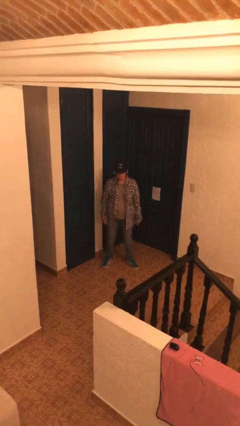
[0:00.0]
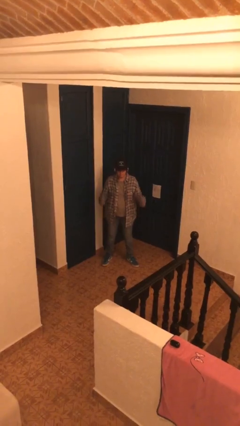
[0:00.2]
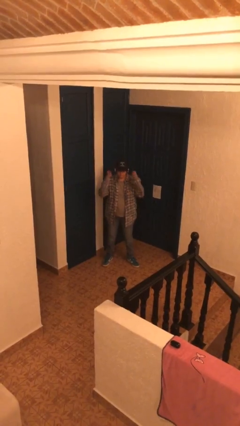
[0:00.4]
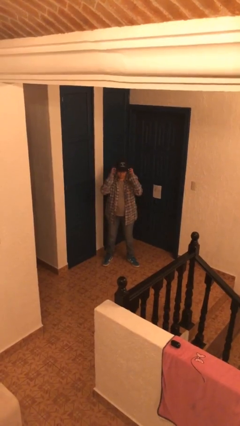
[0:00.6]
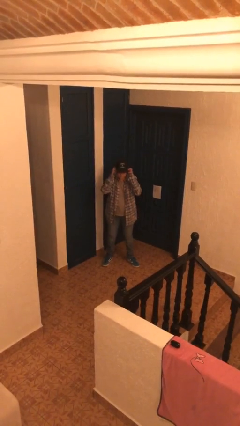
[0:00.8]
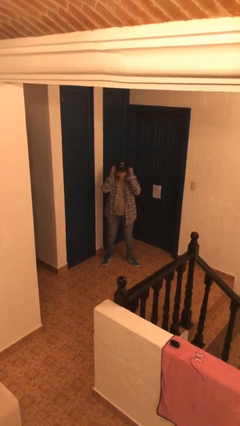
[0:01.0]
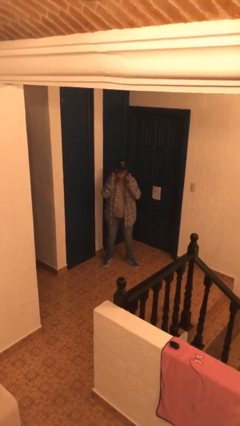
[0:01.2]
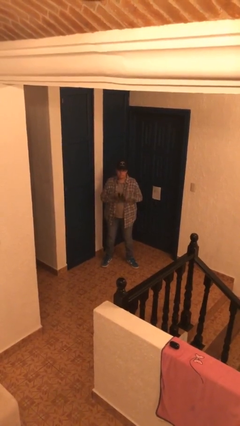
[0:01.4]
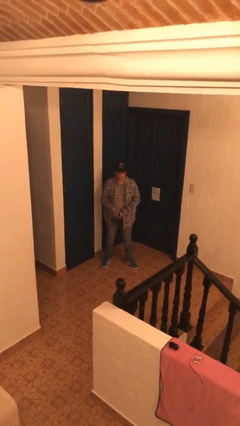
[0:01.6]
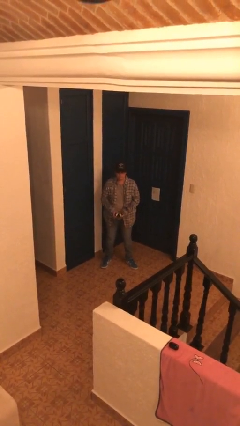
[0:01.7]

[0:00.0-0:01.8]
person takes off headphones

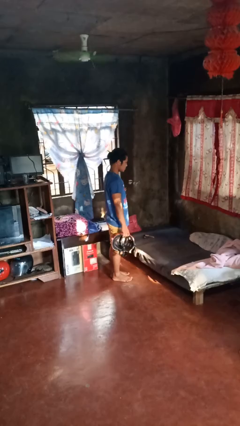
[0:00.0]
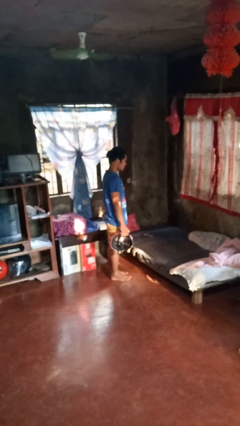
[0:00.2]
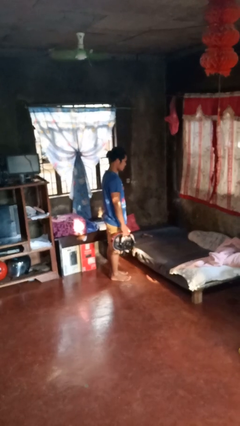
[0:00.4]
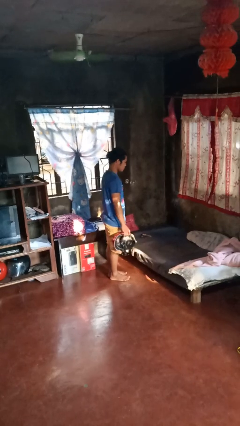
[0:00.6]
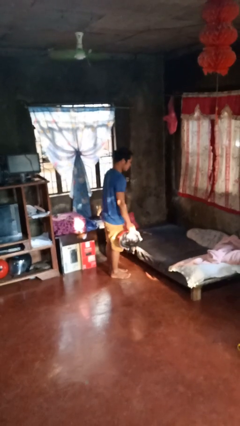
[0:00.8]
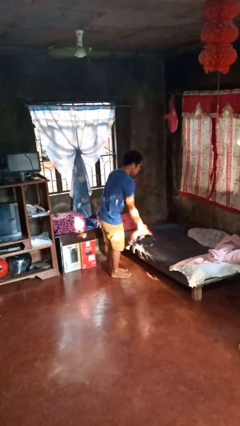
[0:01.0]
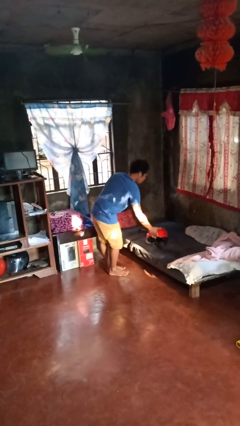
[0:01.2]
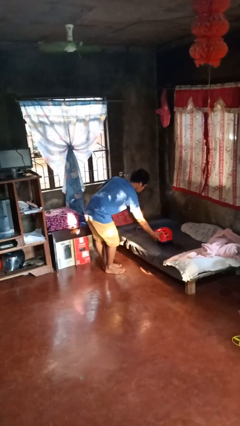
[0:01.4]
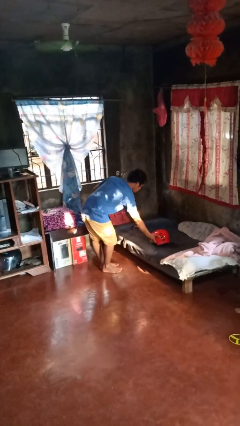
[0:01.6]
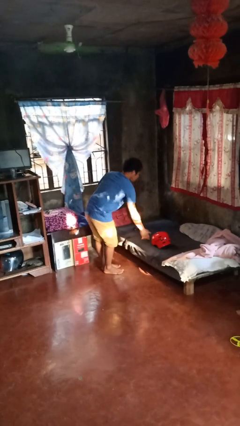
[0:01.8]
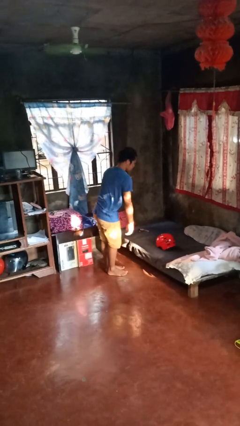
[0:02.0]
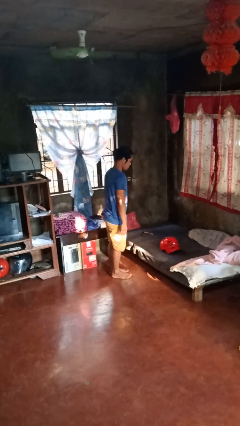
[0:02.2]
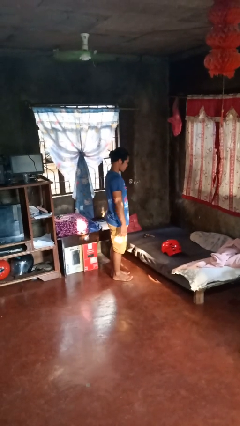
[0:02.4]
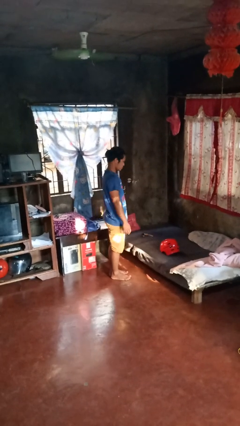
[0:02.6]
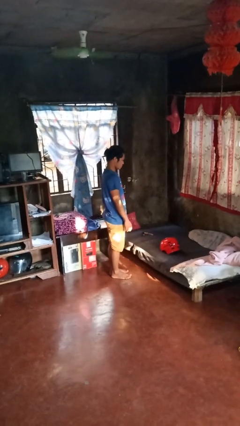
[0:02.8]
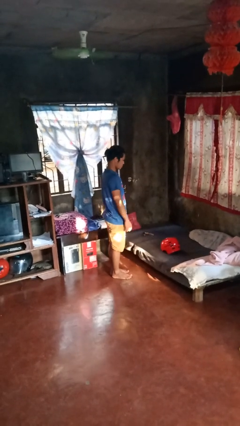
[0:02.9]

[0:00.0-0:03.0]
person puts down object on bed

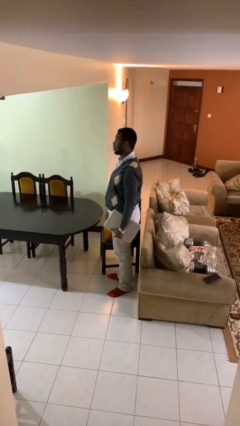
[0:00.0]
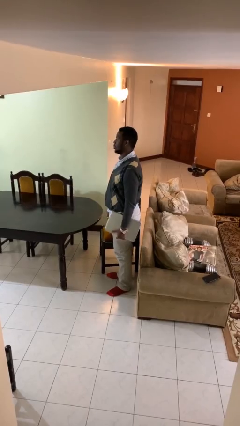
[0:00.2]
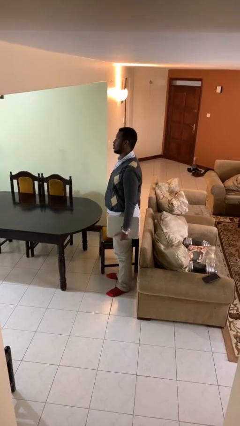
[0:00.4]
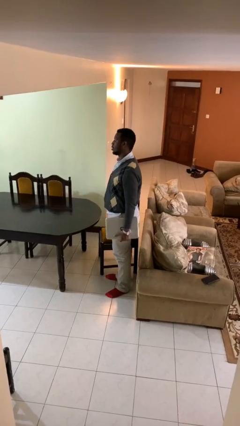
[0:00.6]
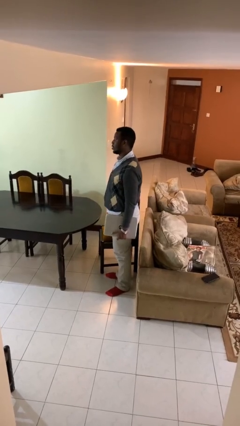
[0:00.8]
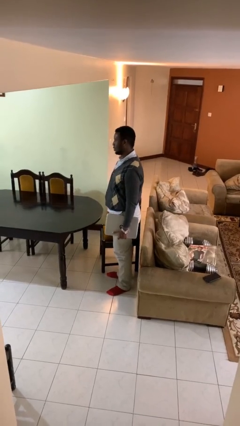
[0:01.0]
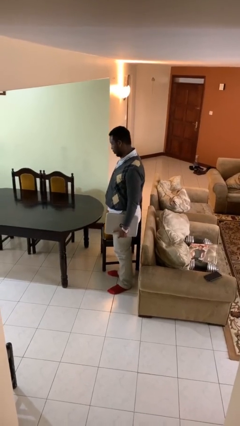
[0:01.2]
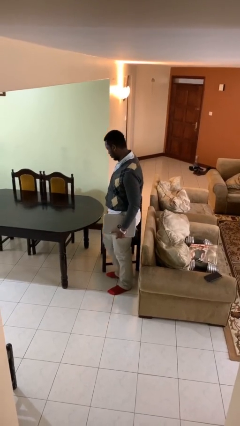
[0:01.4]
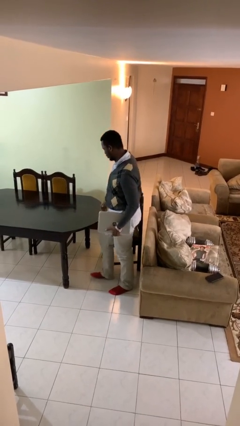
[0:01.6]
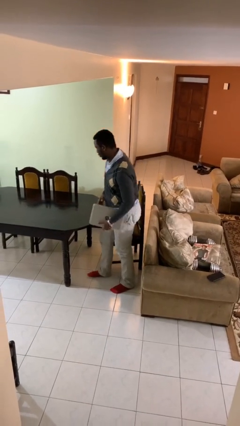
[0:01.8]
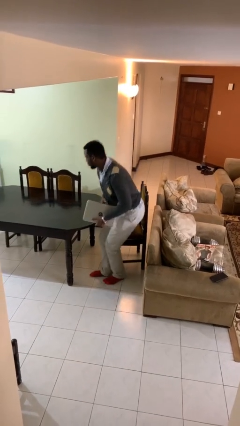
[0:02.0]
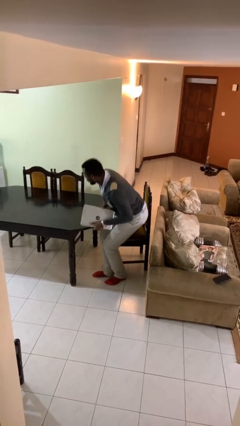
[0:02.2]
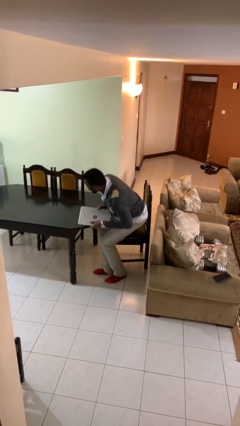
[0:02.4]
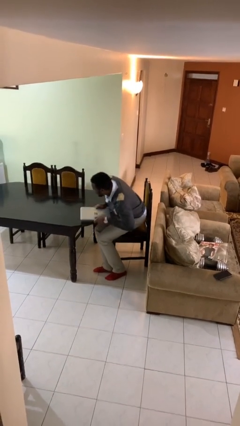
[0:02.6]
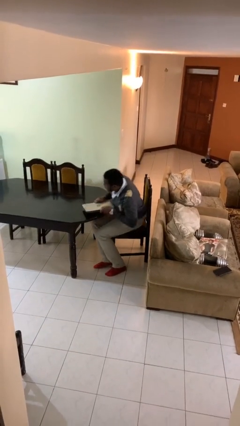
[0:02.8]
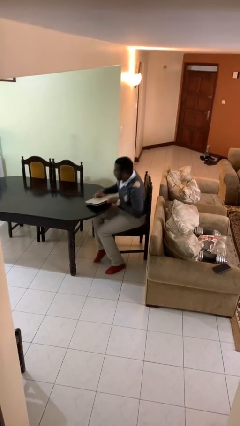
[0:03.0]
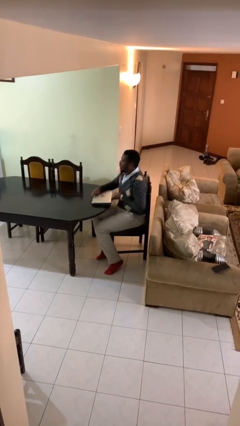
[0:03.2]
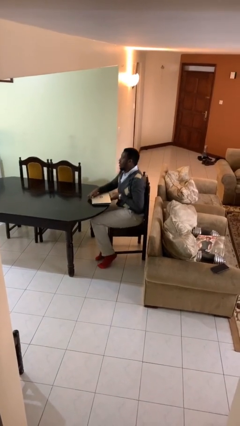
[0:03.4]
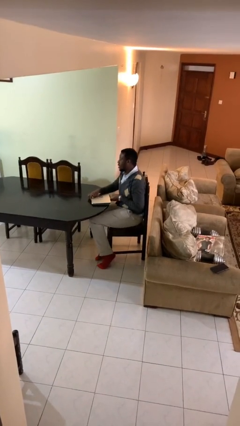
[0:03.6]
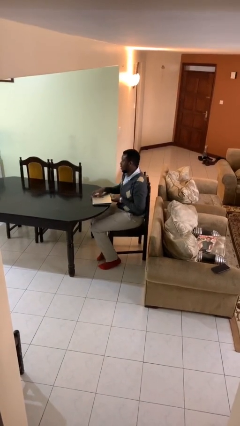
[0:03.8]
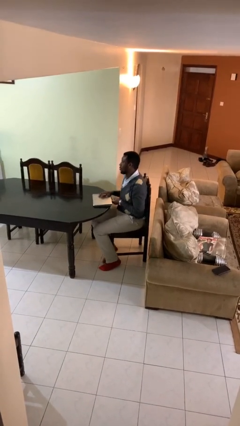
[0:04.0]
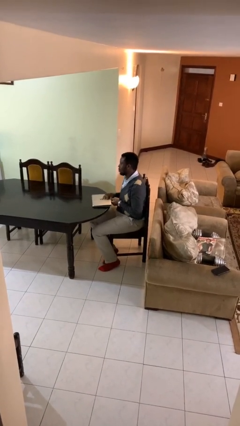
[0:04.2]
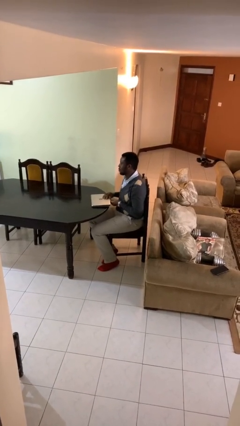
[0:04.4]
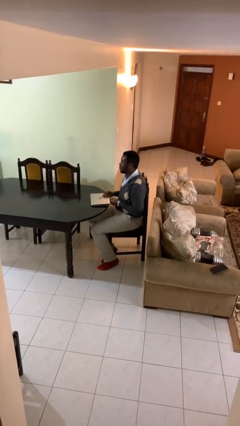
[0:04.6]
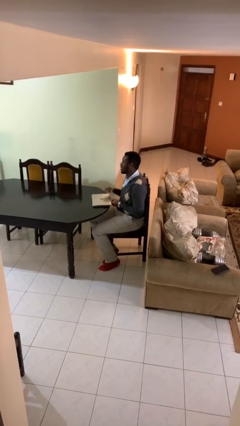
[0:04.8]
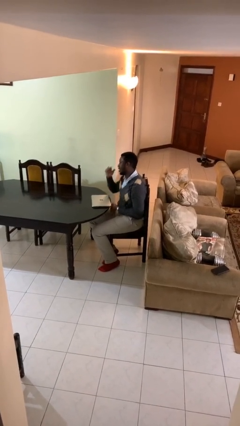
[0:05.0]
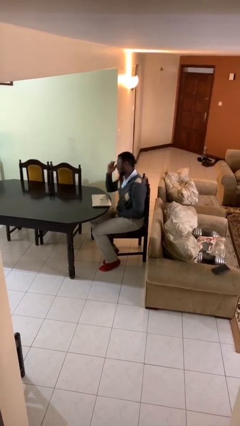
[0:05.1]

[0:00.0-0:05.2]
person sits down

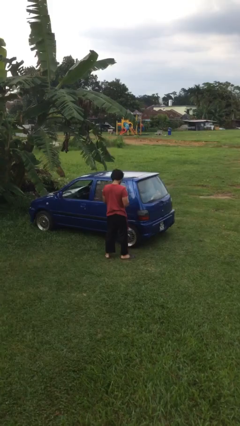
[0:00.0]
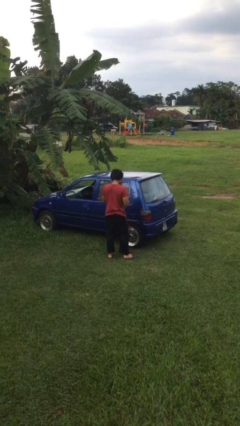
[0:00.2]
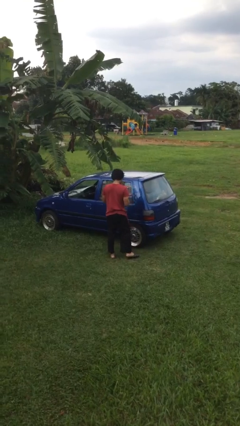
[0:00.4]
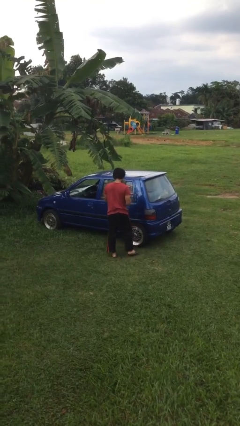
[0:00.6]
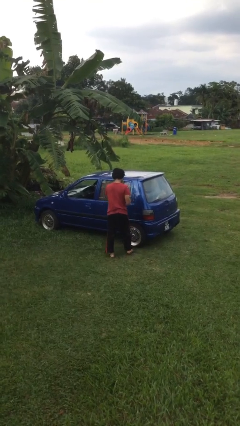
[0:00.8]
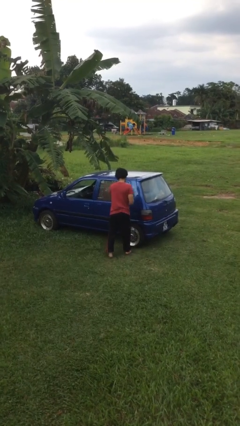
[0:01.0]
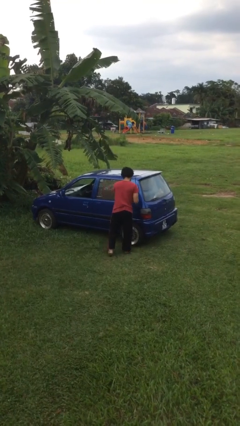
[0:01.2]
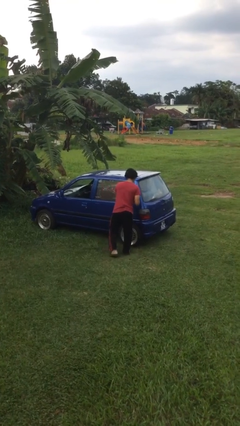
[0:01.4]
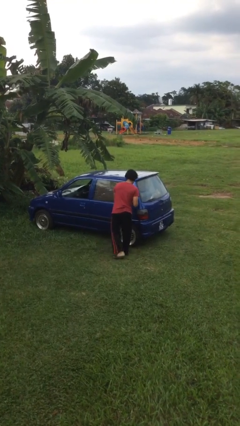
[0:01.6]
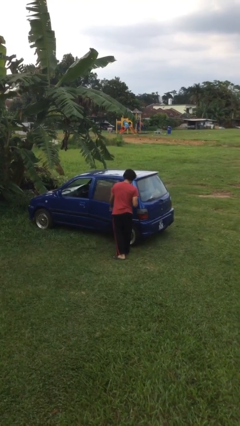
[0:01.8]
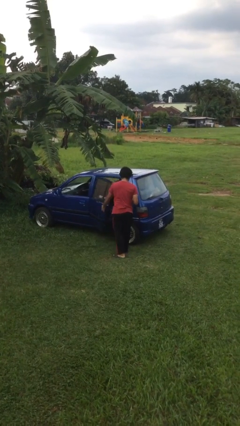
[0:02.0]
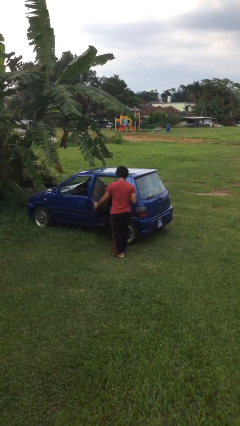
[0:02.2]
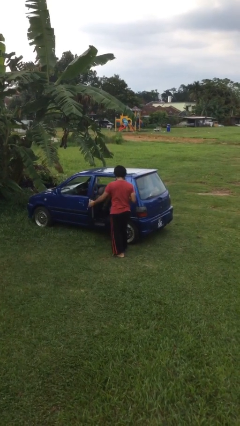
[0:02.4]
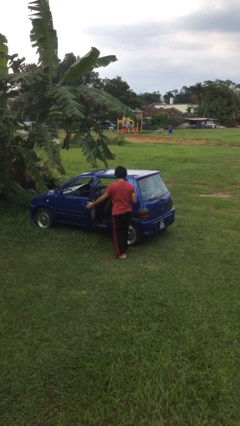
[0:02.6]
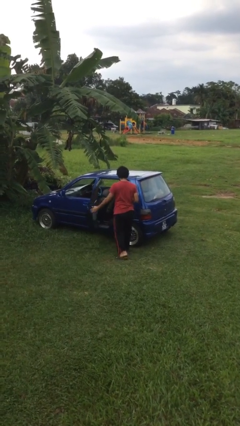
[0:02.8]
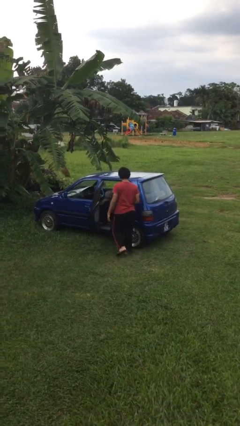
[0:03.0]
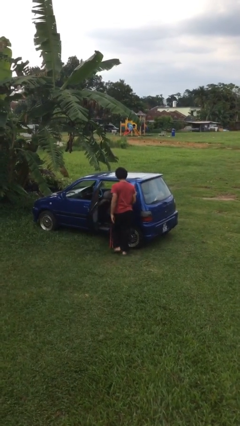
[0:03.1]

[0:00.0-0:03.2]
person opens car door

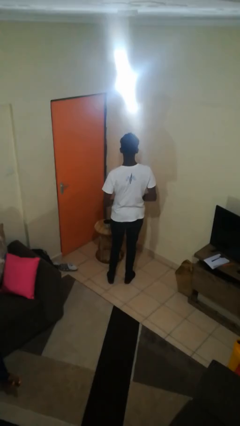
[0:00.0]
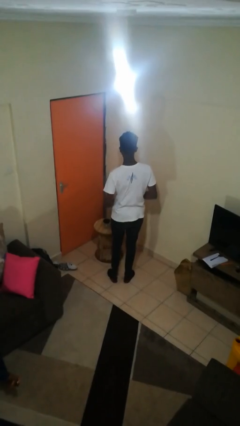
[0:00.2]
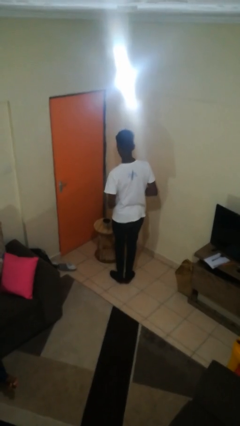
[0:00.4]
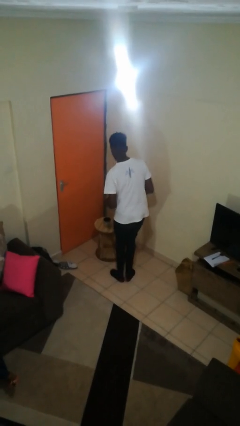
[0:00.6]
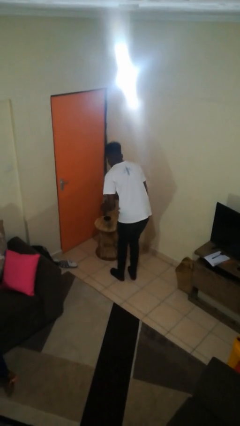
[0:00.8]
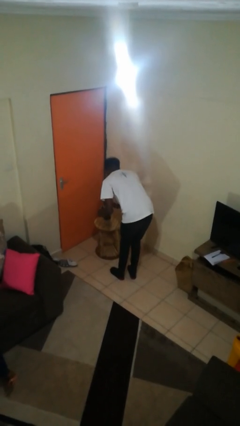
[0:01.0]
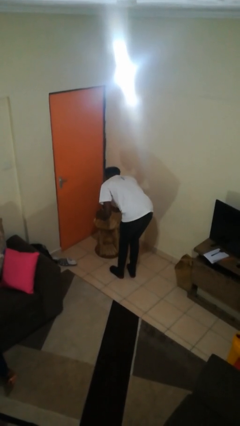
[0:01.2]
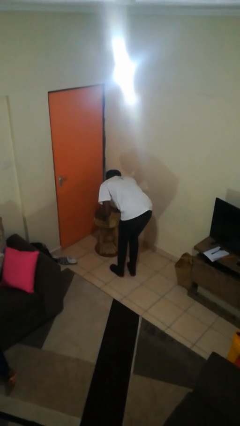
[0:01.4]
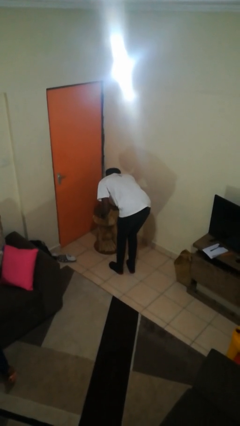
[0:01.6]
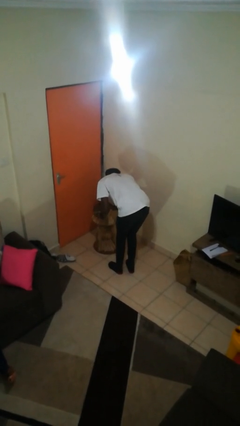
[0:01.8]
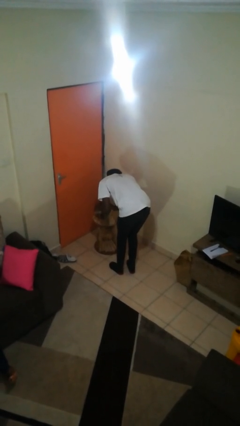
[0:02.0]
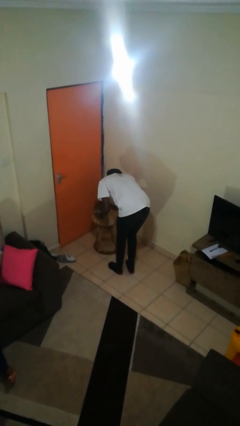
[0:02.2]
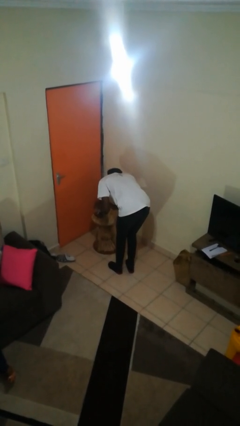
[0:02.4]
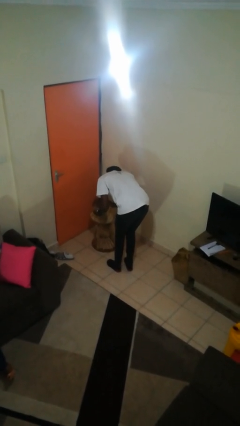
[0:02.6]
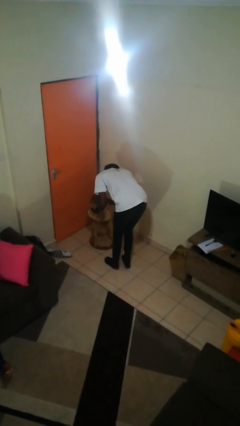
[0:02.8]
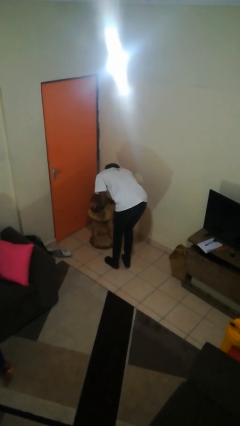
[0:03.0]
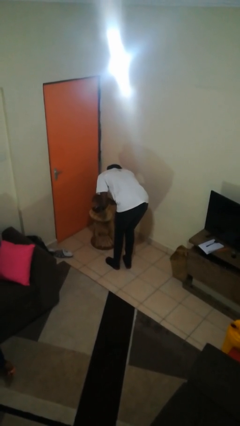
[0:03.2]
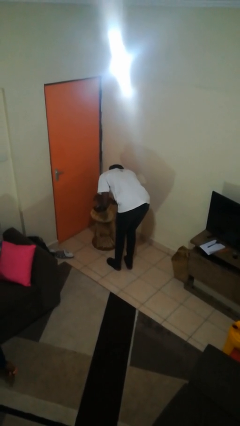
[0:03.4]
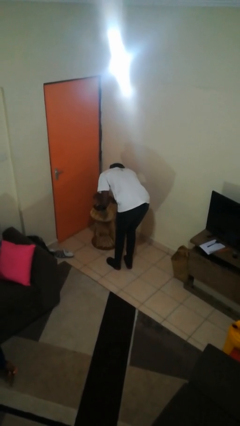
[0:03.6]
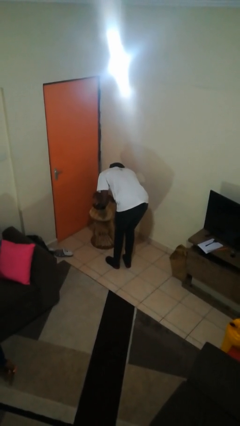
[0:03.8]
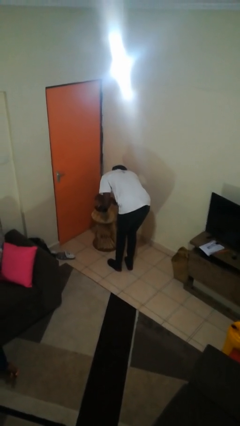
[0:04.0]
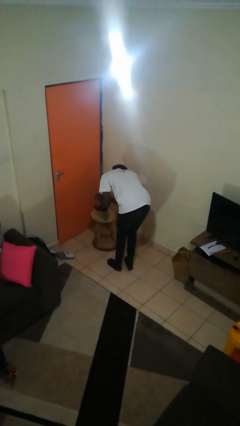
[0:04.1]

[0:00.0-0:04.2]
person pours coffee into mug

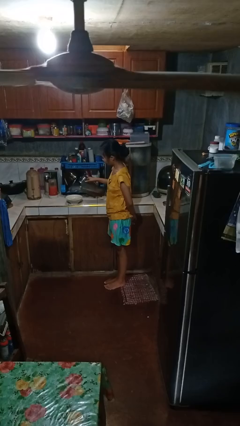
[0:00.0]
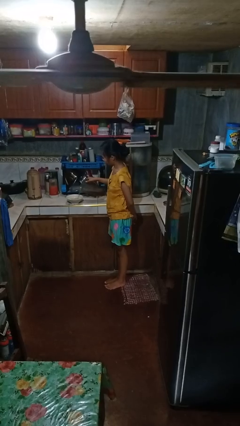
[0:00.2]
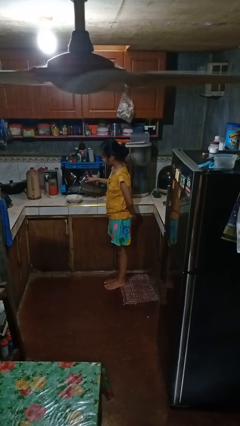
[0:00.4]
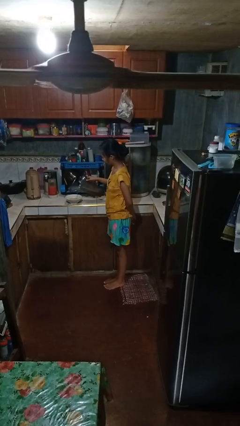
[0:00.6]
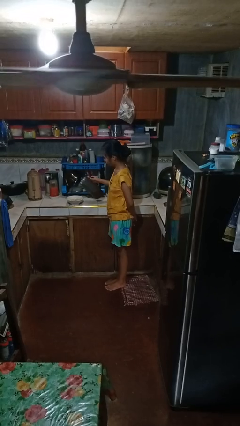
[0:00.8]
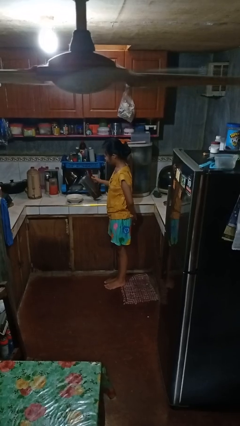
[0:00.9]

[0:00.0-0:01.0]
person pours into bowl
